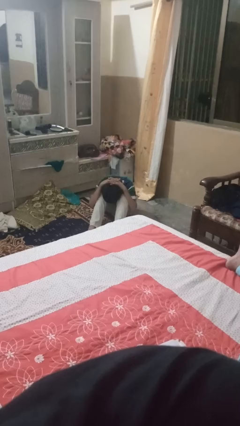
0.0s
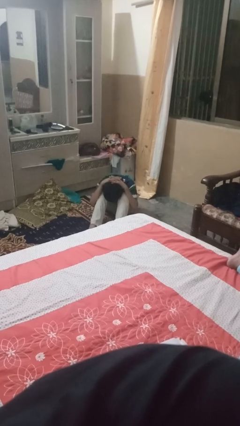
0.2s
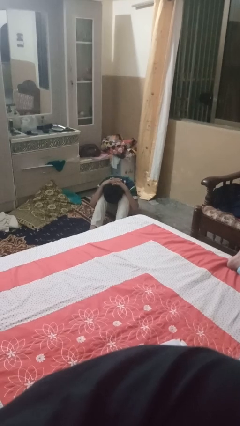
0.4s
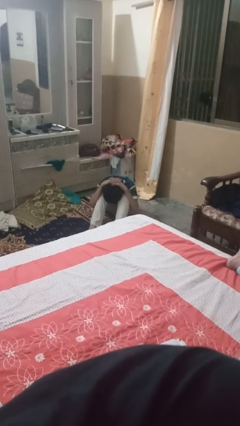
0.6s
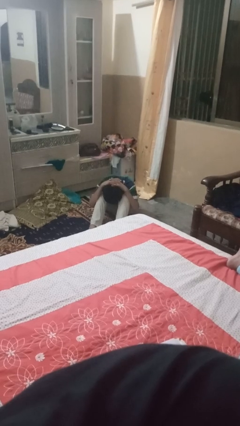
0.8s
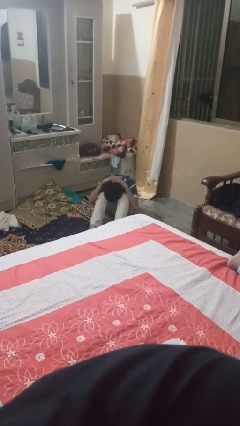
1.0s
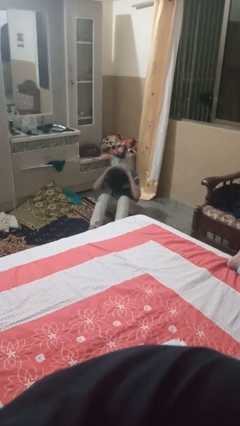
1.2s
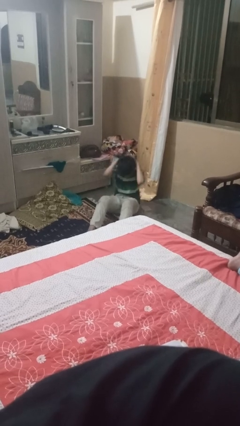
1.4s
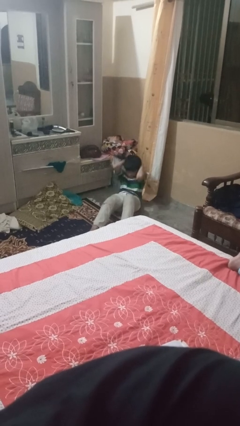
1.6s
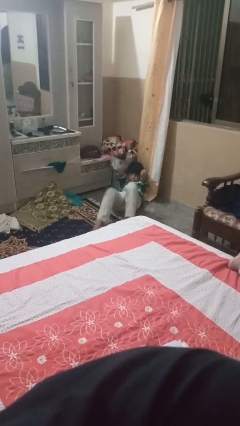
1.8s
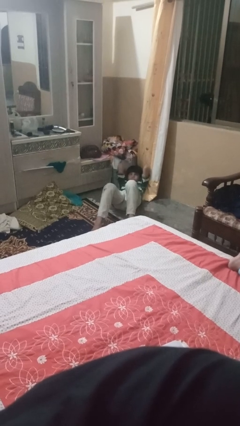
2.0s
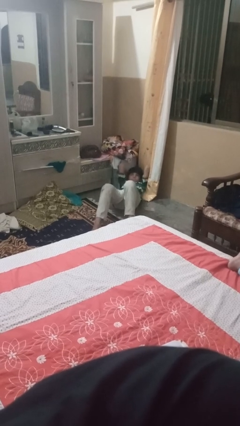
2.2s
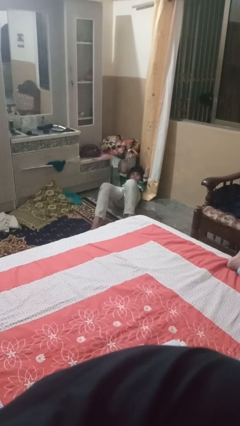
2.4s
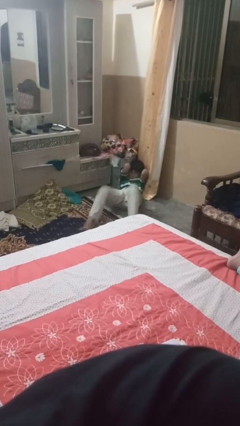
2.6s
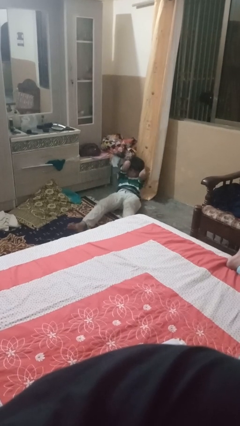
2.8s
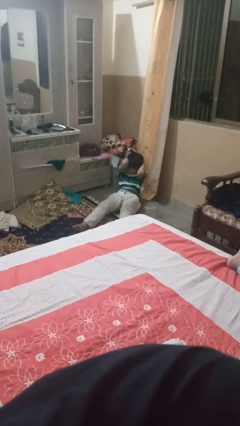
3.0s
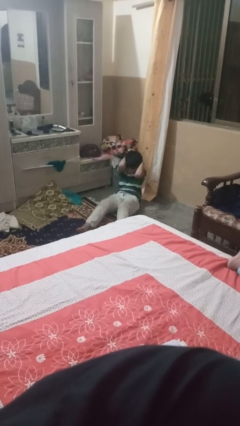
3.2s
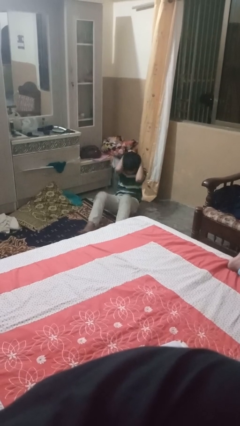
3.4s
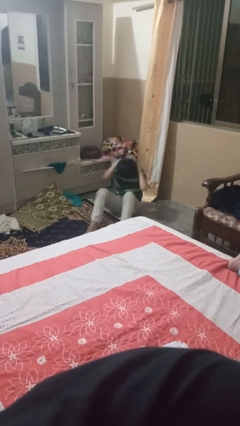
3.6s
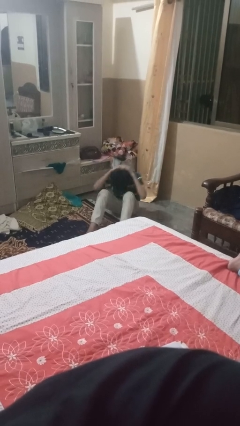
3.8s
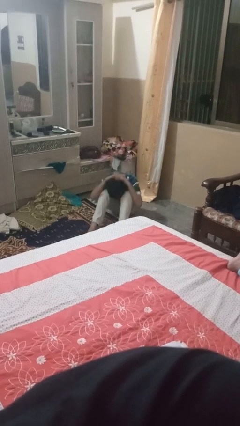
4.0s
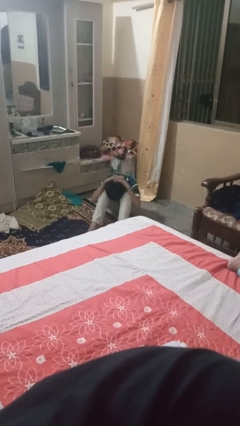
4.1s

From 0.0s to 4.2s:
person exercises with situp

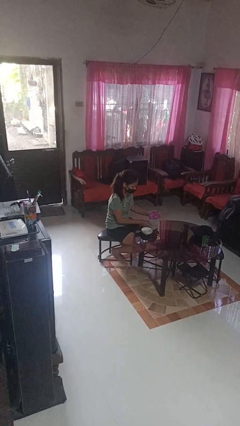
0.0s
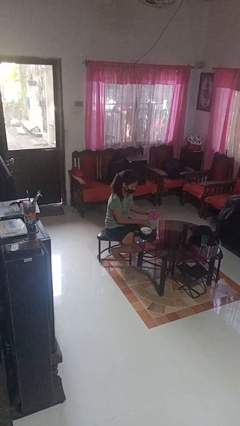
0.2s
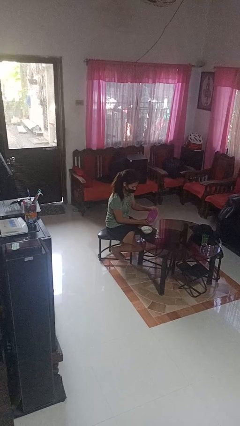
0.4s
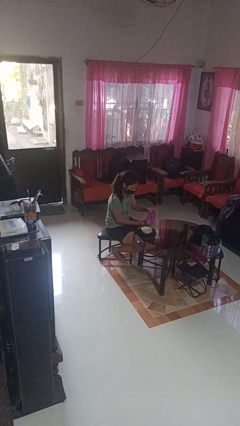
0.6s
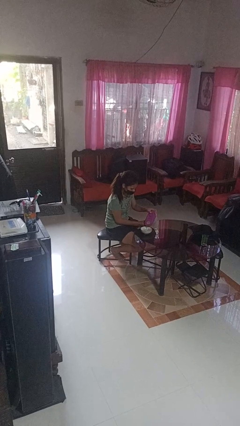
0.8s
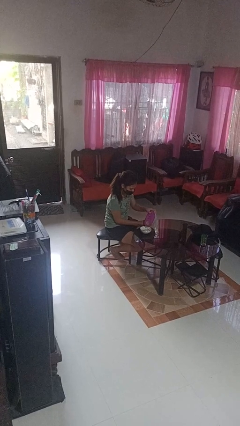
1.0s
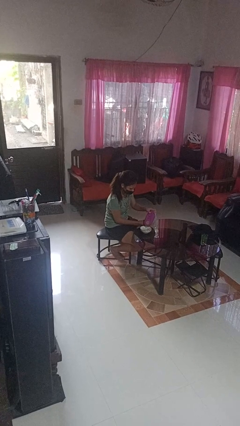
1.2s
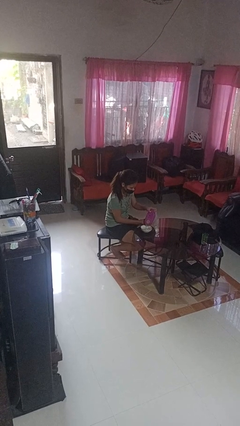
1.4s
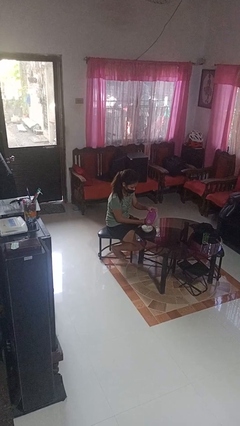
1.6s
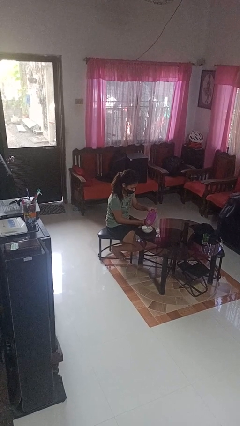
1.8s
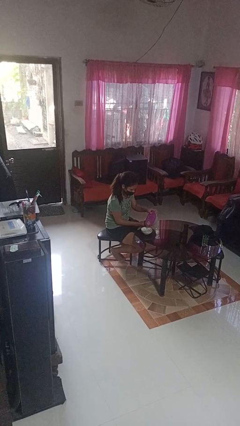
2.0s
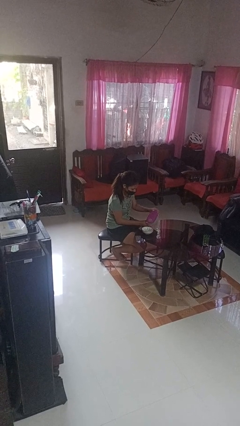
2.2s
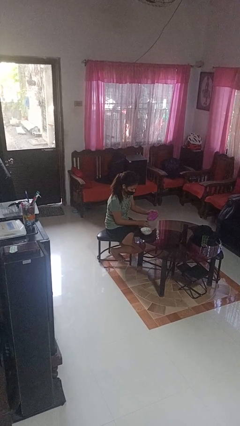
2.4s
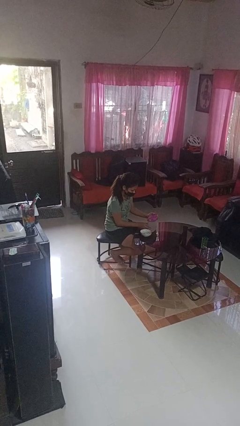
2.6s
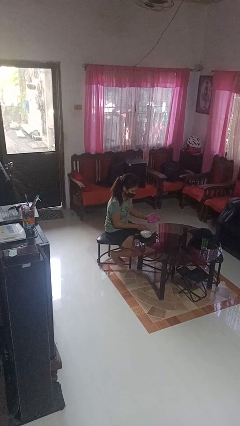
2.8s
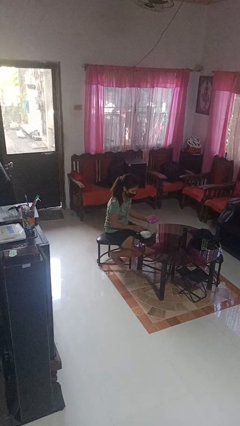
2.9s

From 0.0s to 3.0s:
person pours into bowl

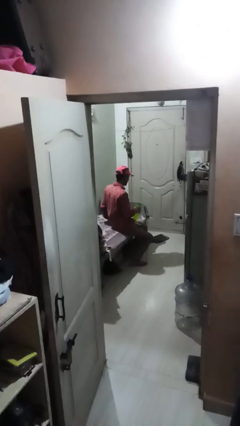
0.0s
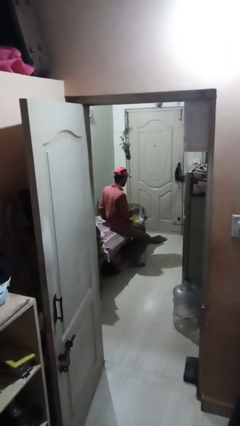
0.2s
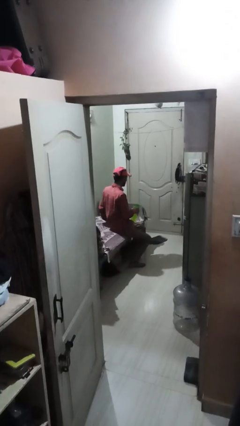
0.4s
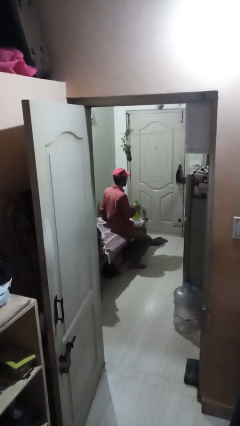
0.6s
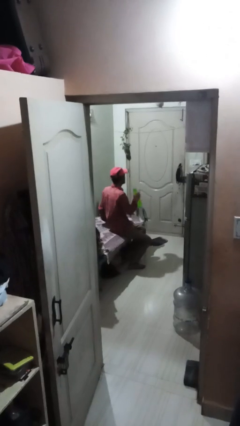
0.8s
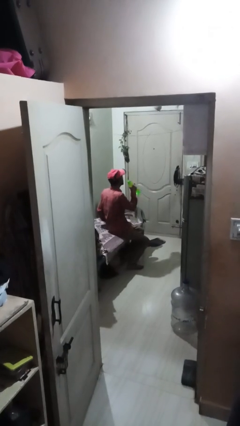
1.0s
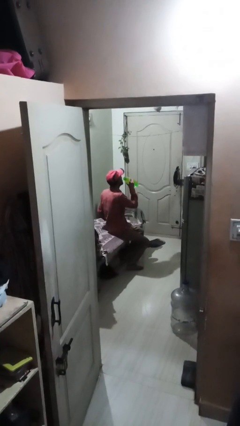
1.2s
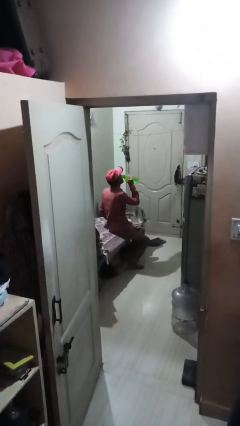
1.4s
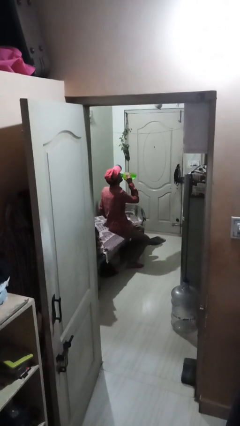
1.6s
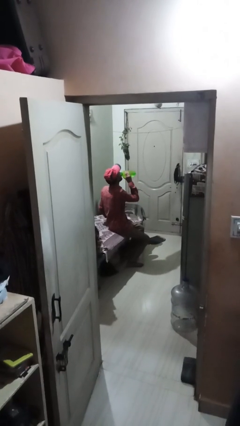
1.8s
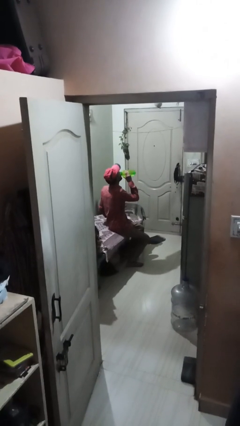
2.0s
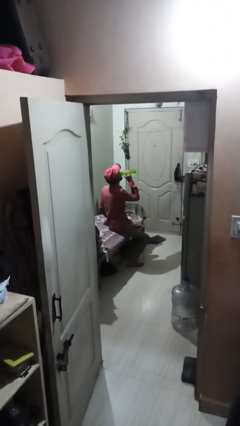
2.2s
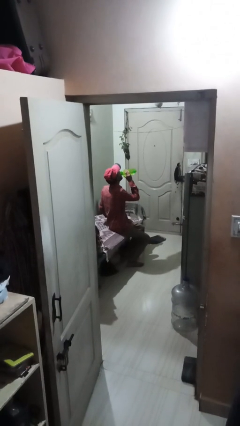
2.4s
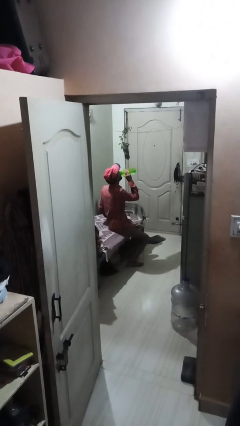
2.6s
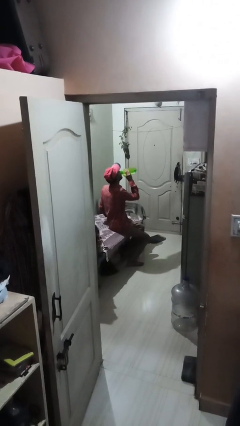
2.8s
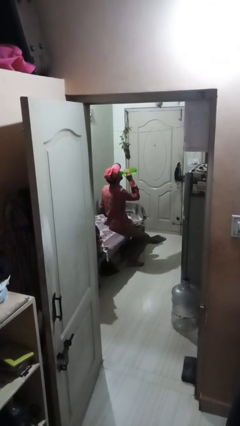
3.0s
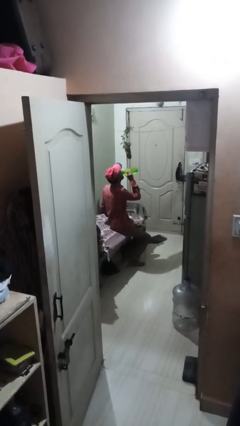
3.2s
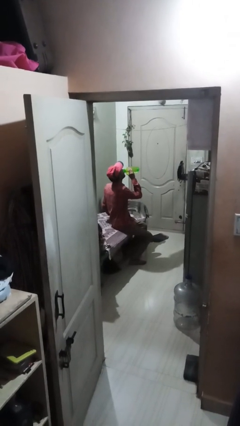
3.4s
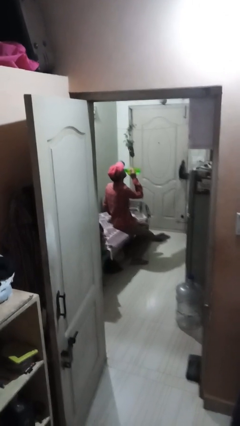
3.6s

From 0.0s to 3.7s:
person drinks from bottle

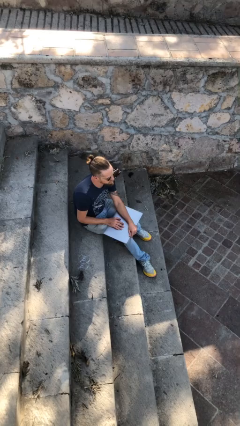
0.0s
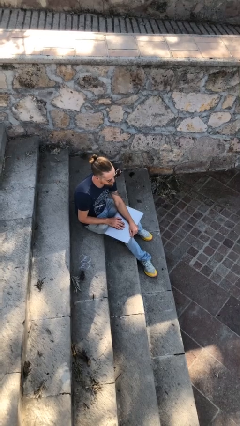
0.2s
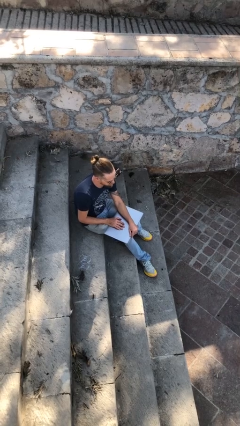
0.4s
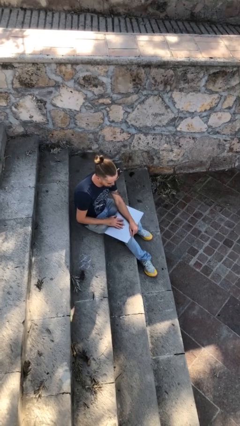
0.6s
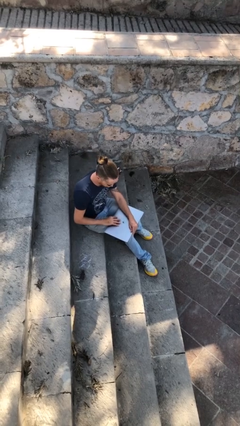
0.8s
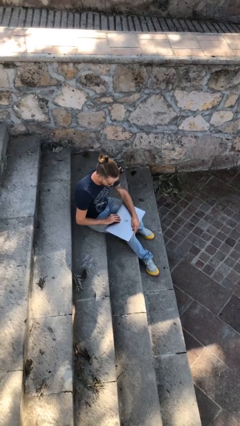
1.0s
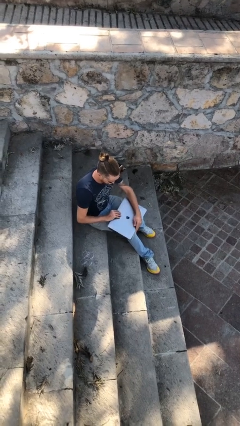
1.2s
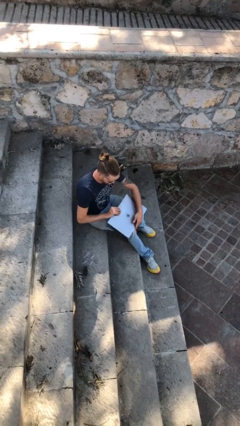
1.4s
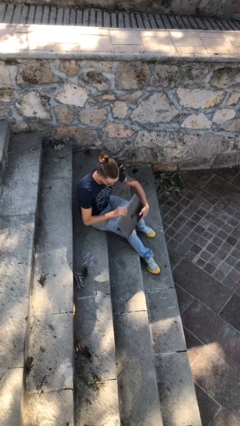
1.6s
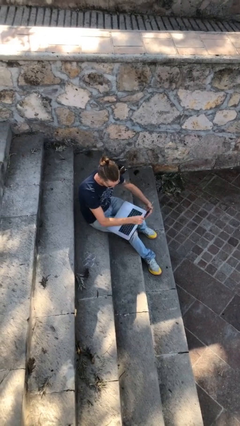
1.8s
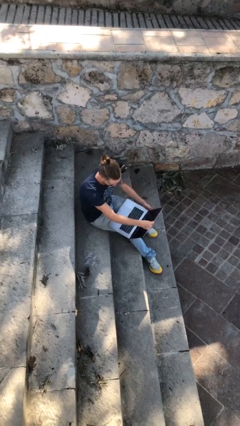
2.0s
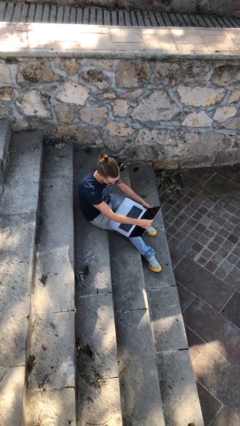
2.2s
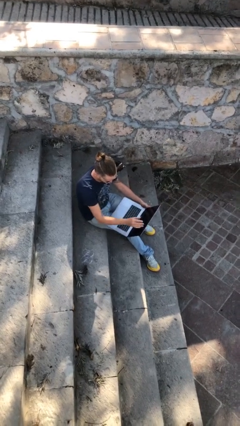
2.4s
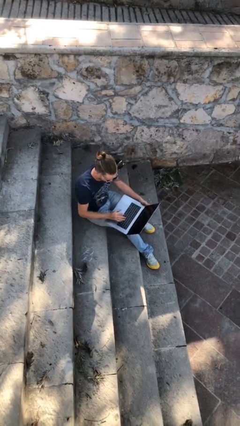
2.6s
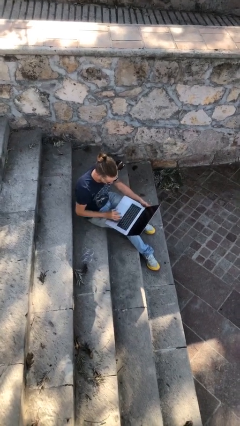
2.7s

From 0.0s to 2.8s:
person interacts with laptop

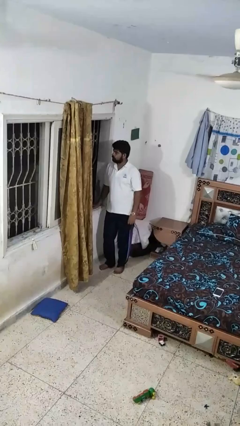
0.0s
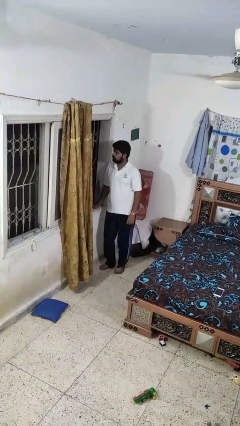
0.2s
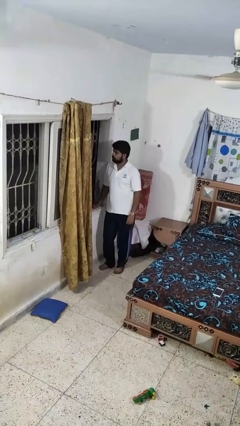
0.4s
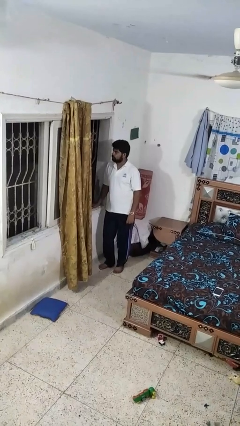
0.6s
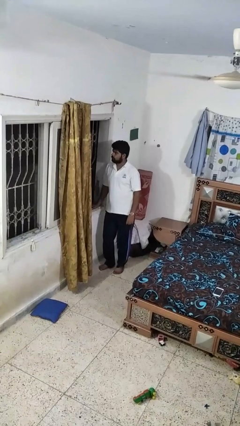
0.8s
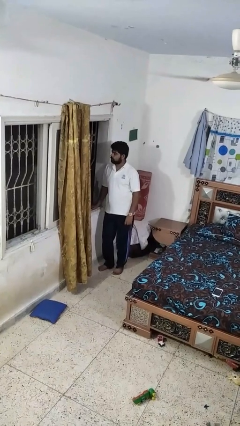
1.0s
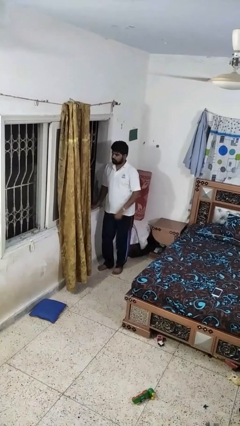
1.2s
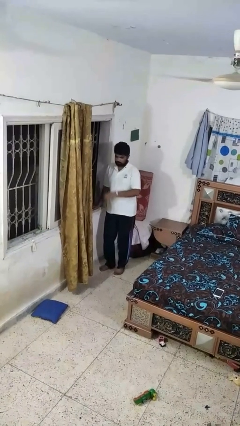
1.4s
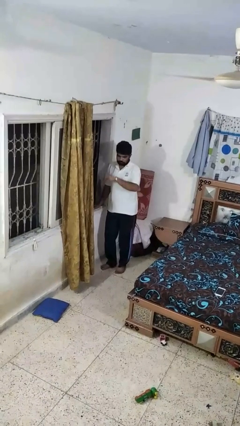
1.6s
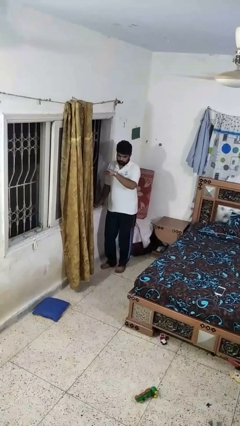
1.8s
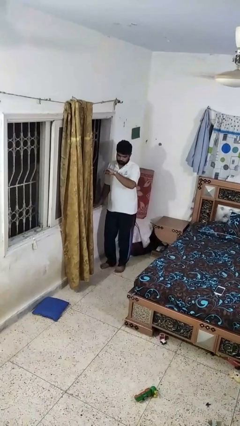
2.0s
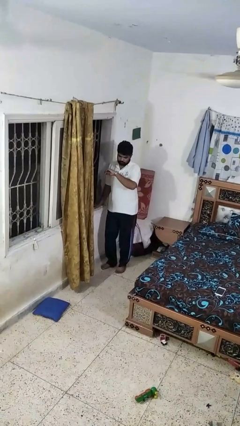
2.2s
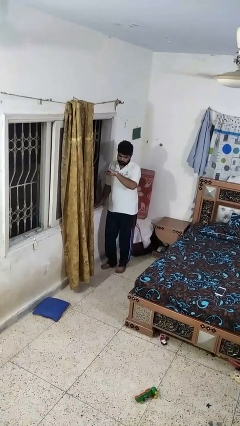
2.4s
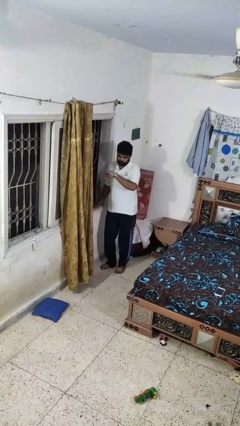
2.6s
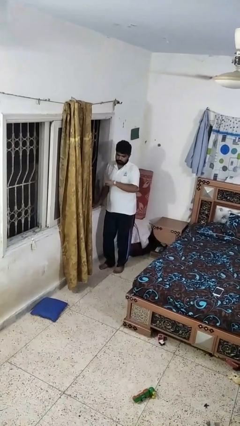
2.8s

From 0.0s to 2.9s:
person looks at wristwatch

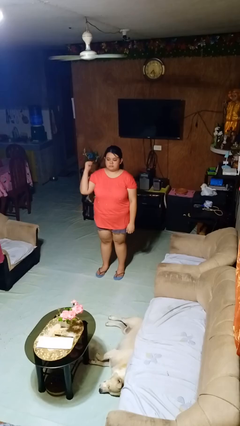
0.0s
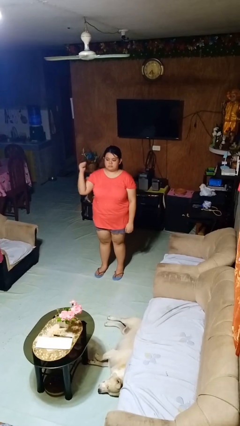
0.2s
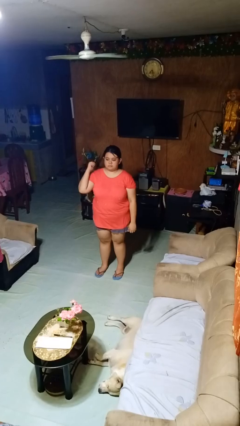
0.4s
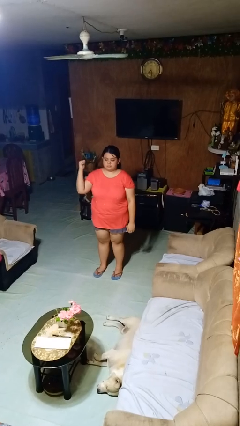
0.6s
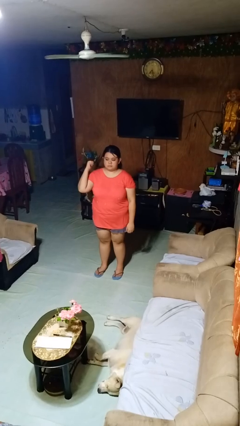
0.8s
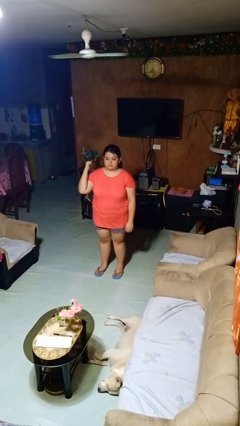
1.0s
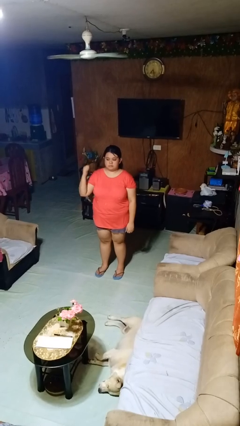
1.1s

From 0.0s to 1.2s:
person gestures behind me
